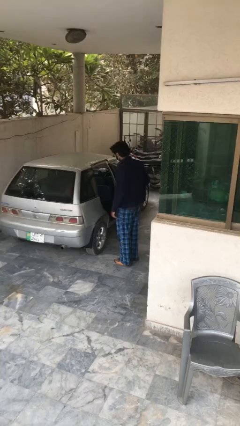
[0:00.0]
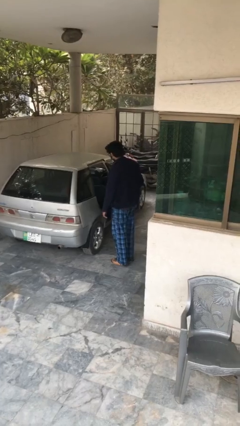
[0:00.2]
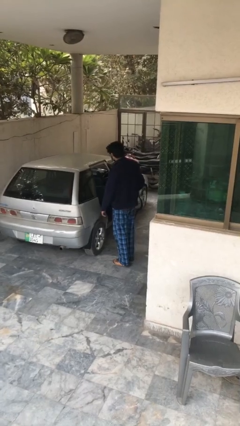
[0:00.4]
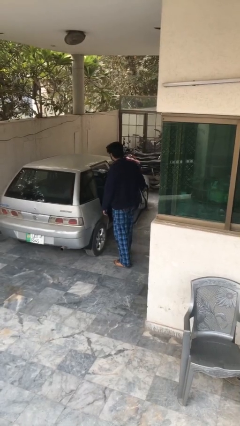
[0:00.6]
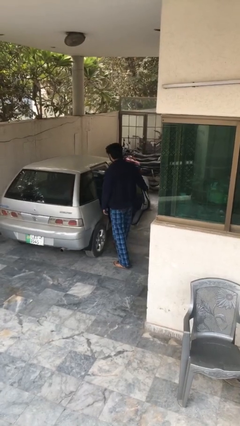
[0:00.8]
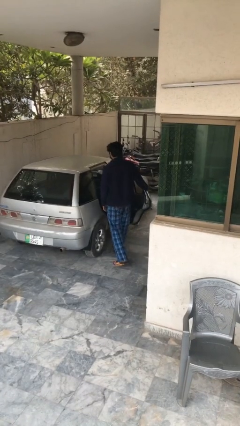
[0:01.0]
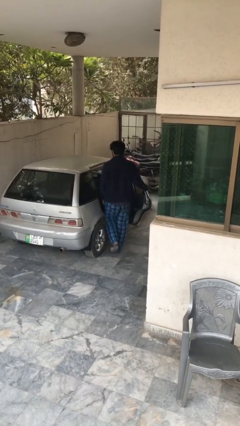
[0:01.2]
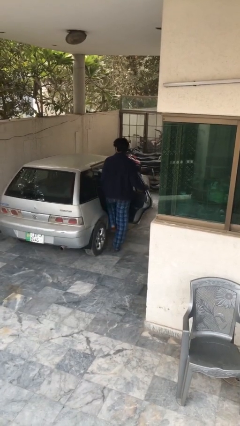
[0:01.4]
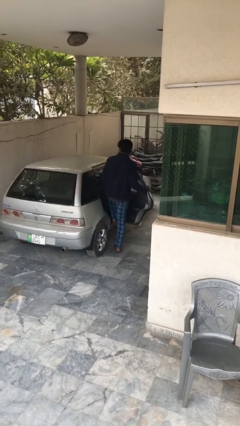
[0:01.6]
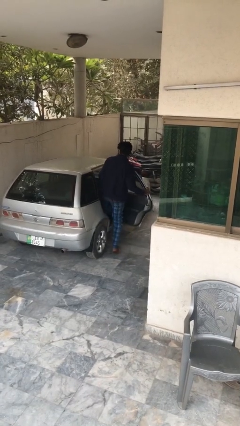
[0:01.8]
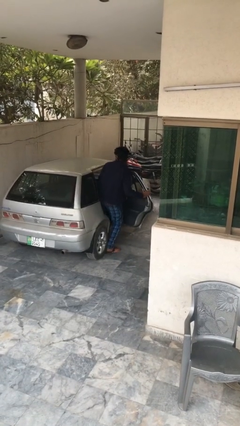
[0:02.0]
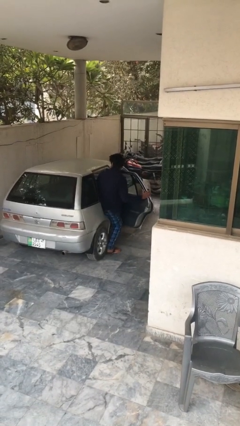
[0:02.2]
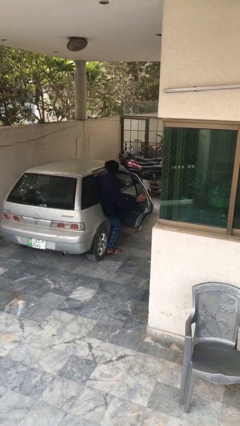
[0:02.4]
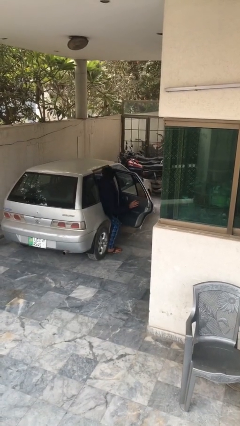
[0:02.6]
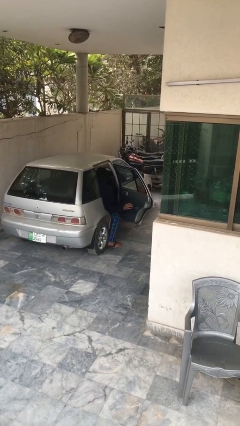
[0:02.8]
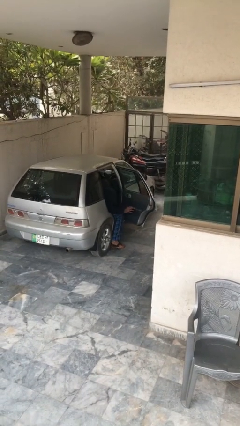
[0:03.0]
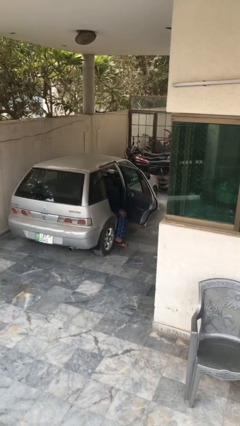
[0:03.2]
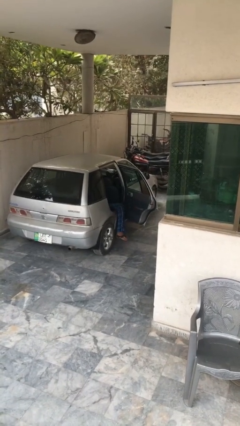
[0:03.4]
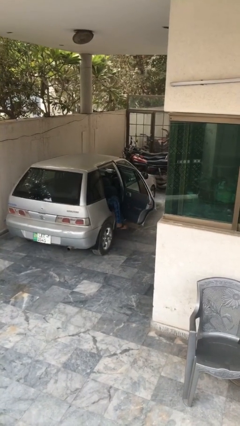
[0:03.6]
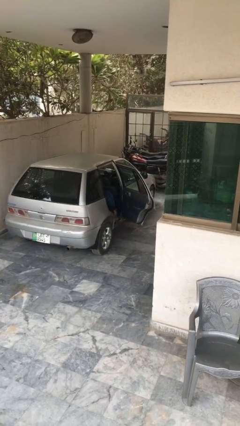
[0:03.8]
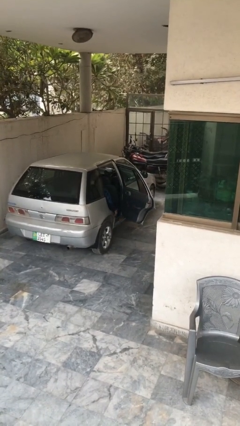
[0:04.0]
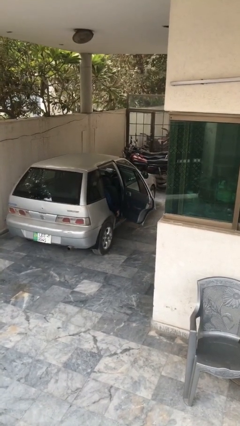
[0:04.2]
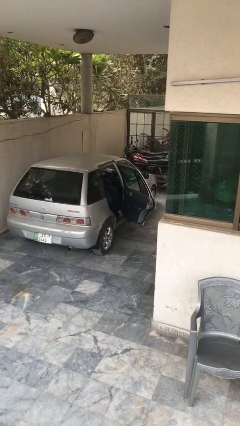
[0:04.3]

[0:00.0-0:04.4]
person enters car

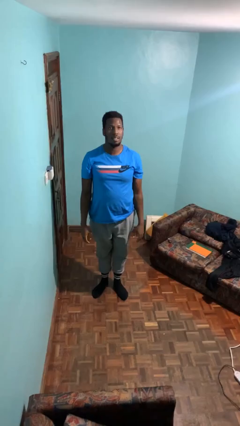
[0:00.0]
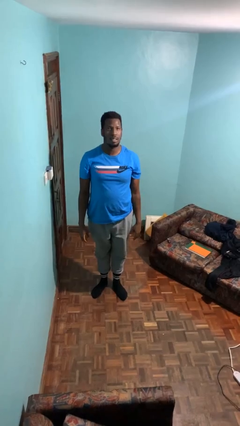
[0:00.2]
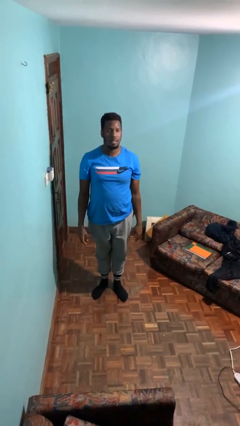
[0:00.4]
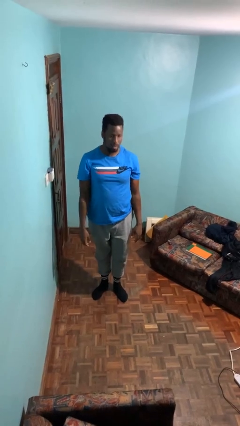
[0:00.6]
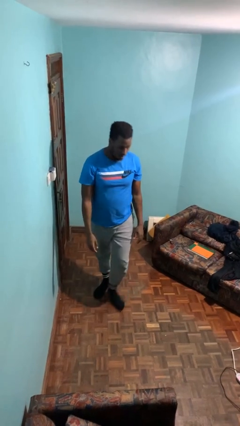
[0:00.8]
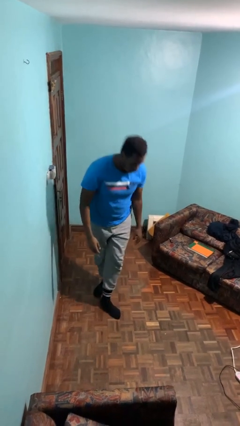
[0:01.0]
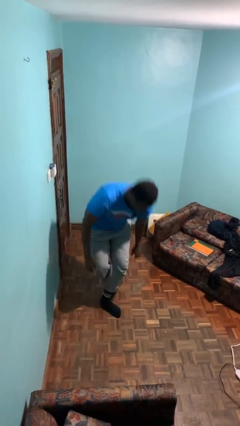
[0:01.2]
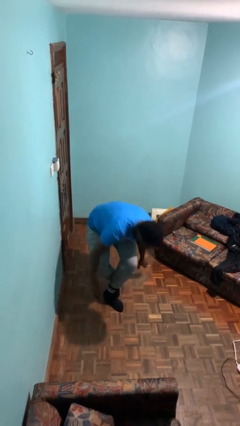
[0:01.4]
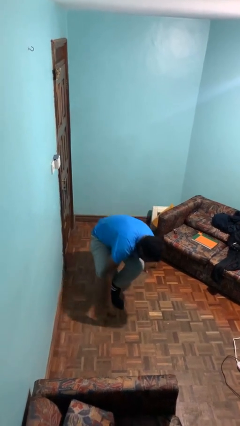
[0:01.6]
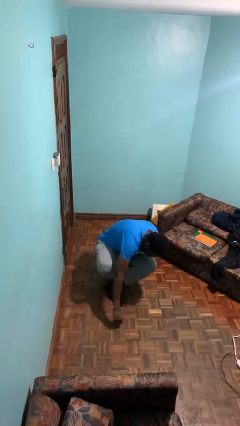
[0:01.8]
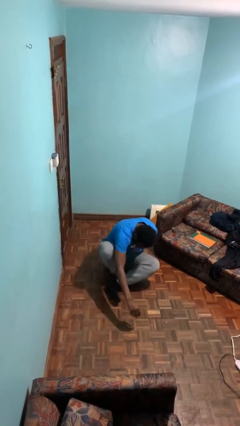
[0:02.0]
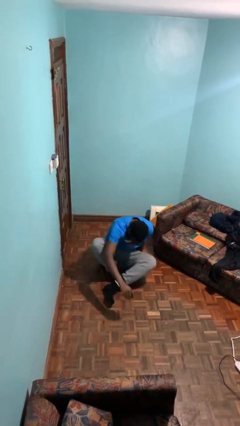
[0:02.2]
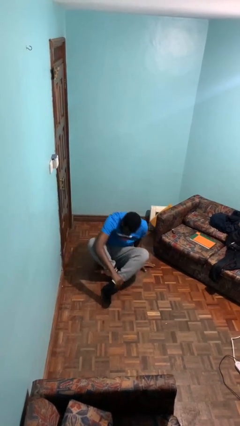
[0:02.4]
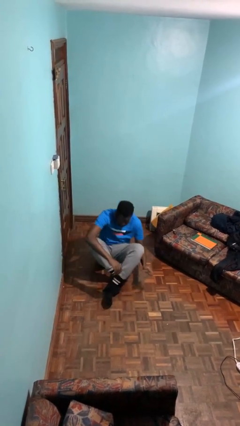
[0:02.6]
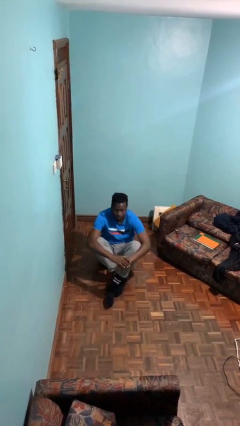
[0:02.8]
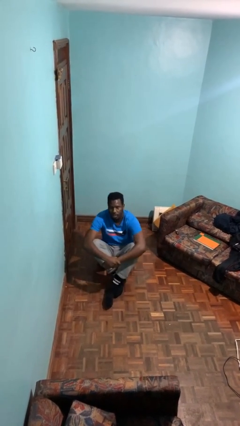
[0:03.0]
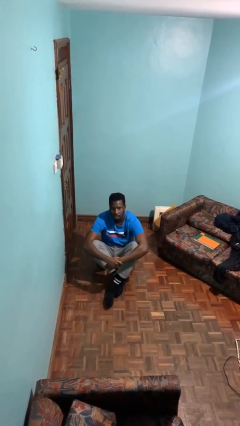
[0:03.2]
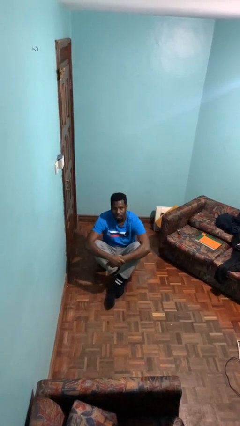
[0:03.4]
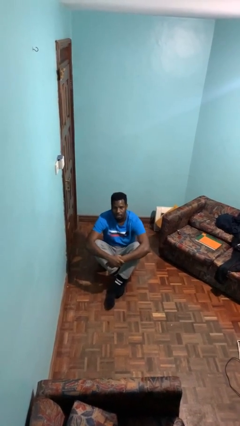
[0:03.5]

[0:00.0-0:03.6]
person sits crisscross

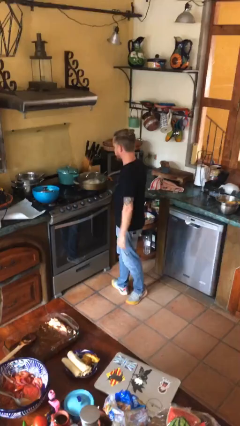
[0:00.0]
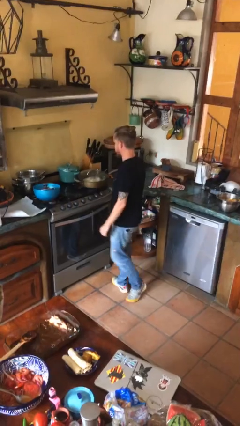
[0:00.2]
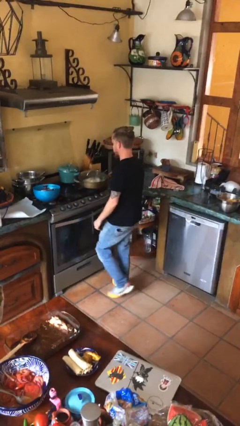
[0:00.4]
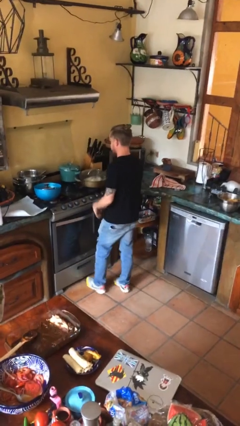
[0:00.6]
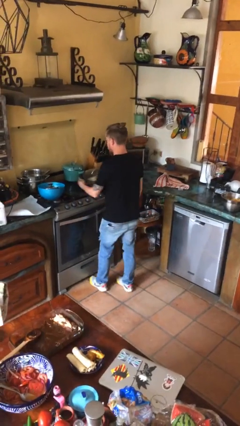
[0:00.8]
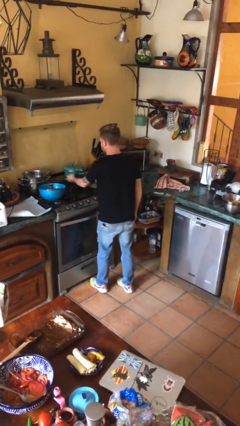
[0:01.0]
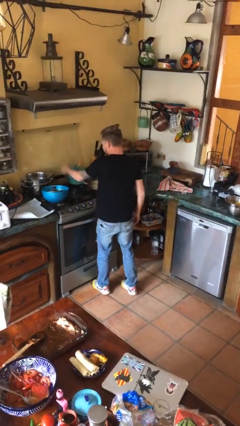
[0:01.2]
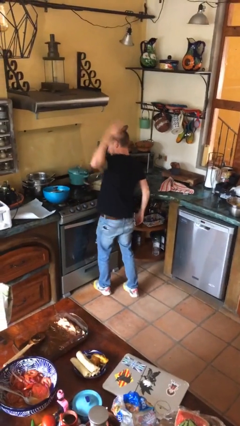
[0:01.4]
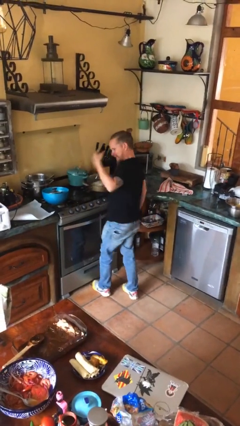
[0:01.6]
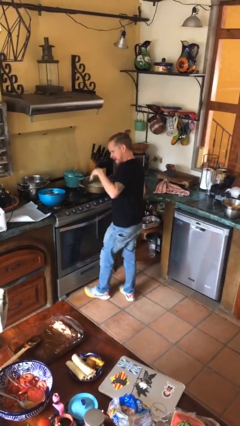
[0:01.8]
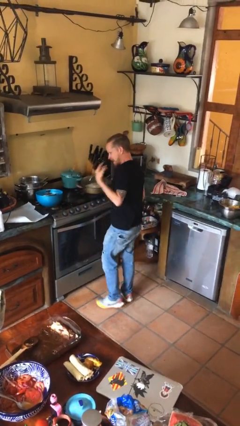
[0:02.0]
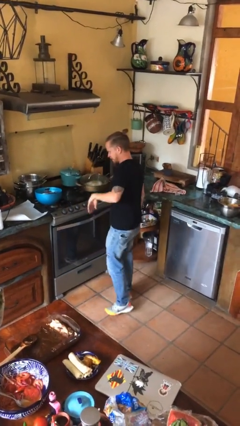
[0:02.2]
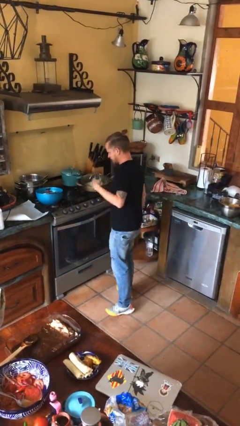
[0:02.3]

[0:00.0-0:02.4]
person burns hand

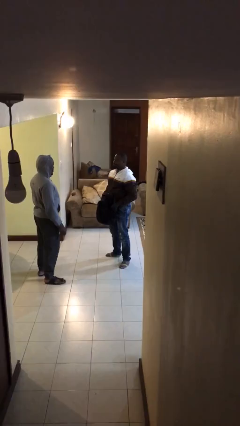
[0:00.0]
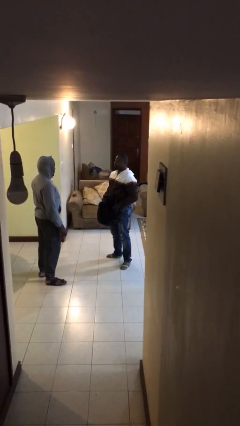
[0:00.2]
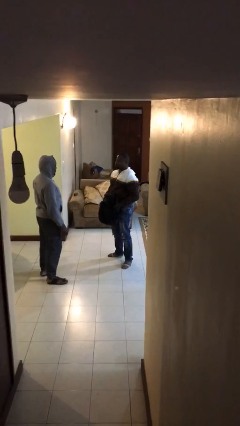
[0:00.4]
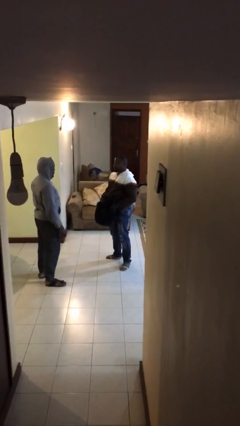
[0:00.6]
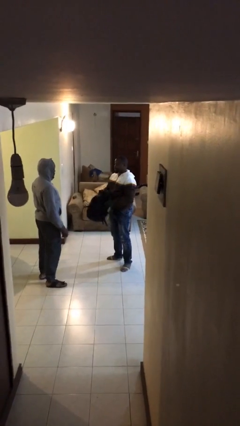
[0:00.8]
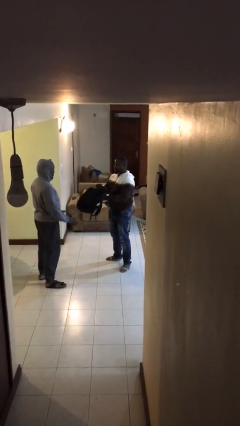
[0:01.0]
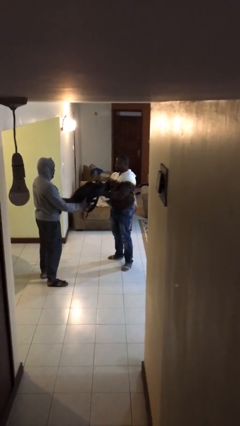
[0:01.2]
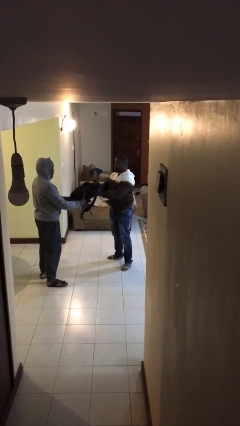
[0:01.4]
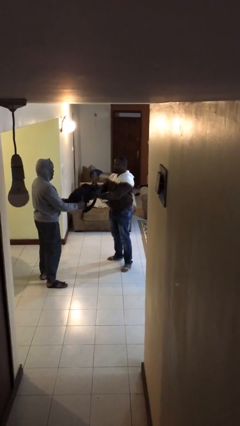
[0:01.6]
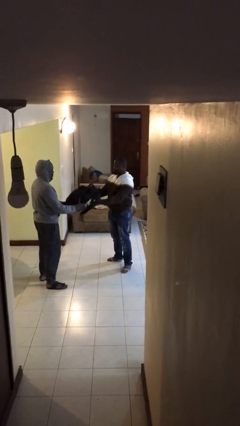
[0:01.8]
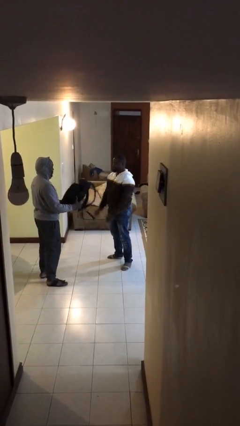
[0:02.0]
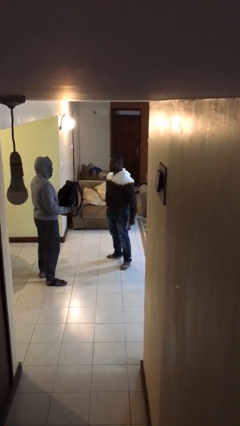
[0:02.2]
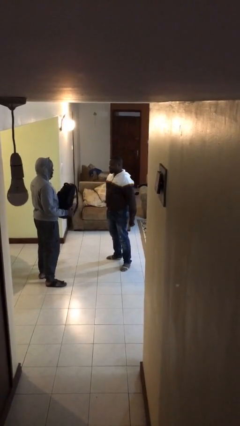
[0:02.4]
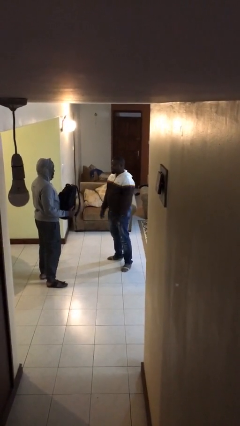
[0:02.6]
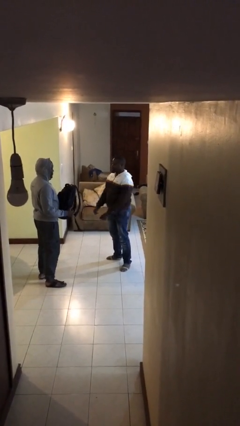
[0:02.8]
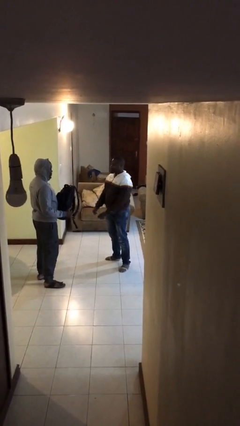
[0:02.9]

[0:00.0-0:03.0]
person transfers object to person

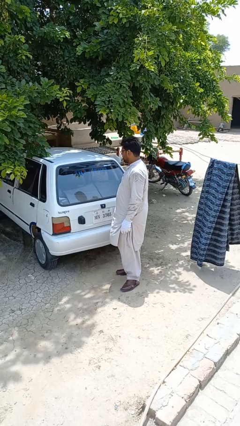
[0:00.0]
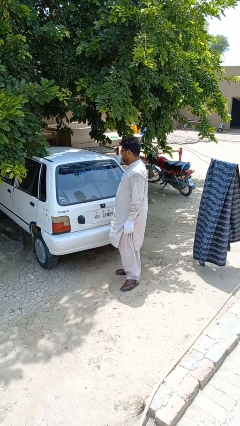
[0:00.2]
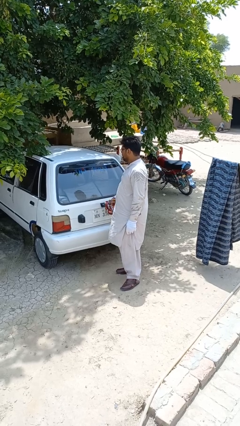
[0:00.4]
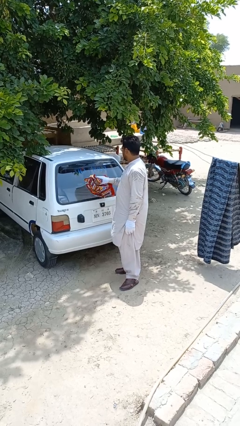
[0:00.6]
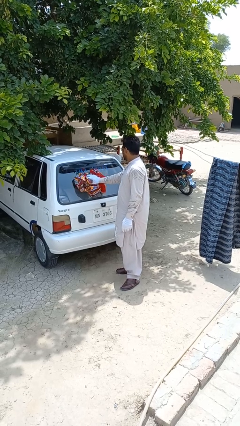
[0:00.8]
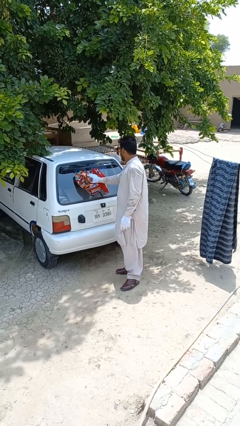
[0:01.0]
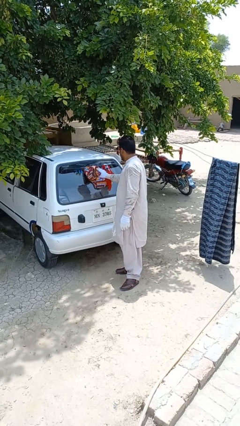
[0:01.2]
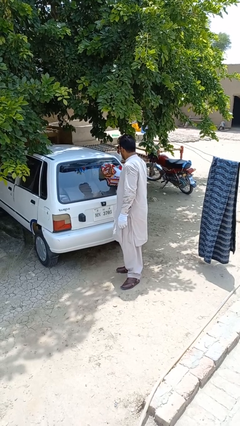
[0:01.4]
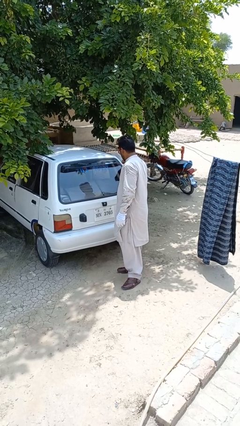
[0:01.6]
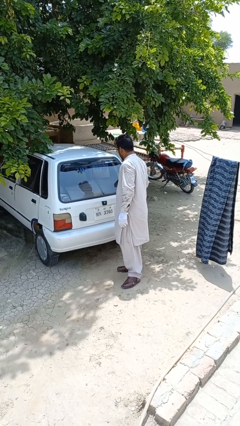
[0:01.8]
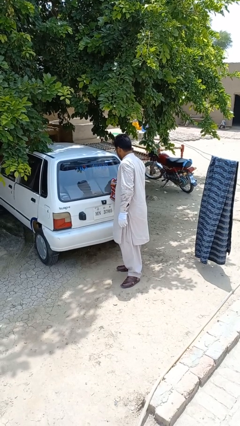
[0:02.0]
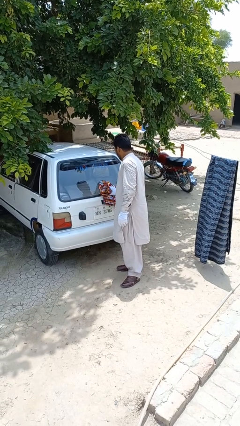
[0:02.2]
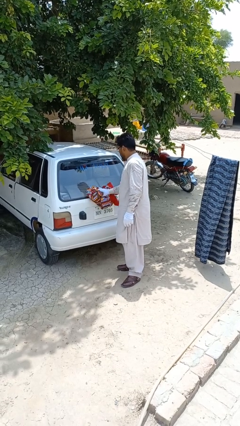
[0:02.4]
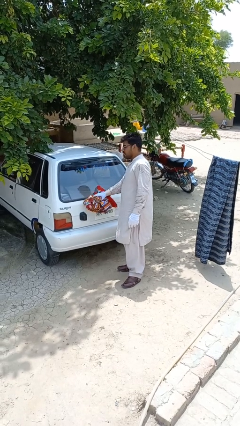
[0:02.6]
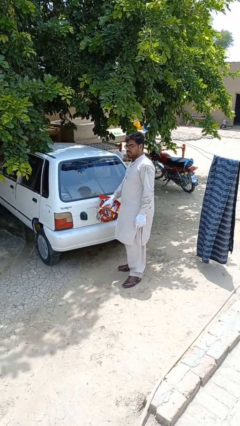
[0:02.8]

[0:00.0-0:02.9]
person polishes car with rag

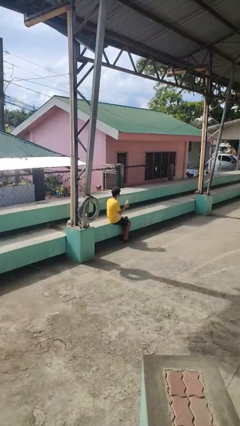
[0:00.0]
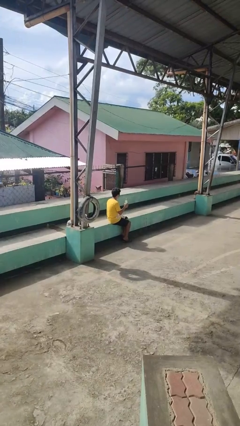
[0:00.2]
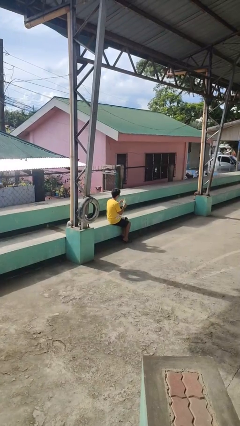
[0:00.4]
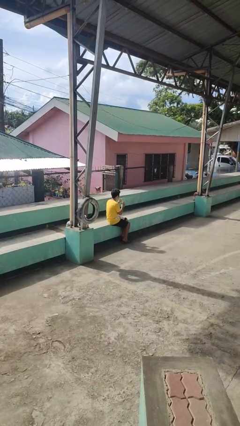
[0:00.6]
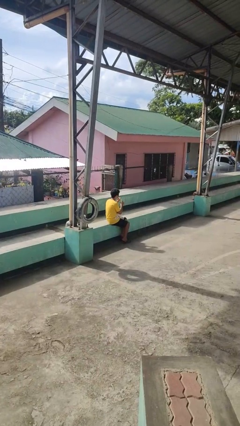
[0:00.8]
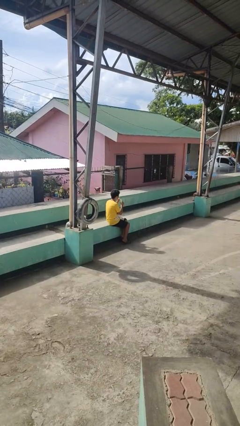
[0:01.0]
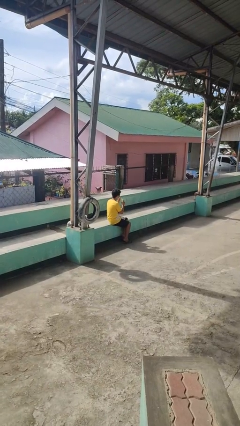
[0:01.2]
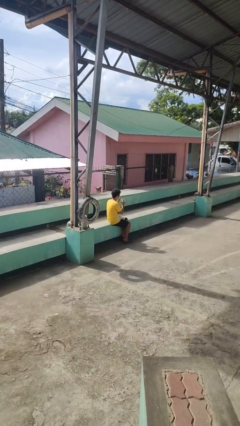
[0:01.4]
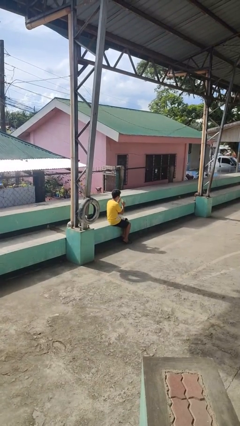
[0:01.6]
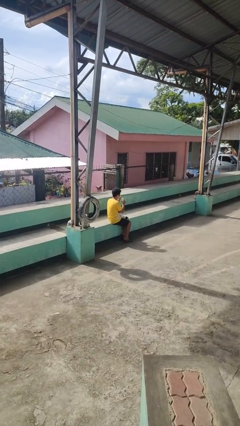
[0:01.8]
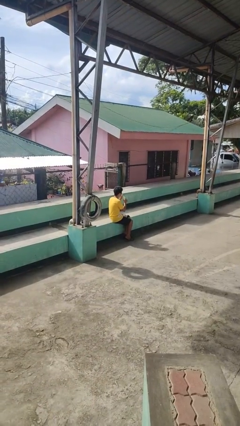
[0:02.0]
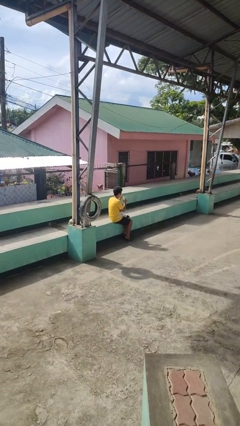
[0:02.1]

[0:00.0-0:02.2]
person drinks from straw
